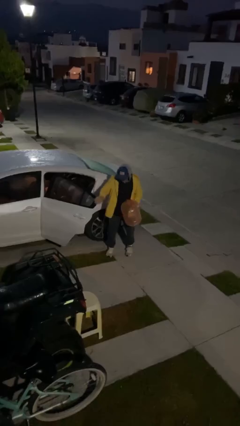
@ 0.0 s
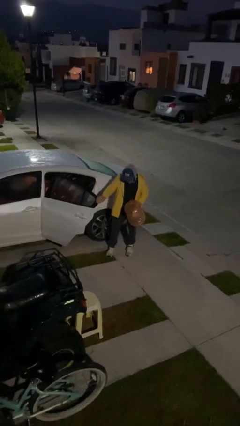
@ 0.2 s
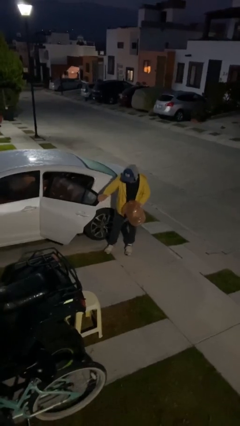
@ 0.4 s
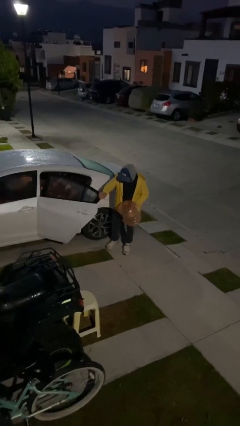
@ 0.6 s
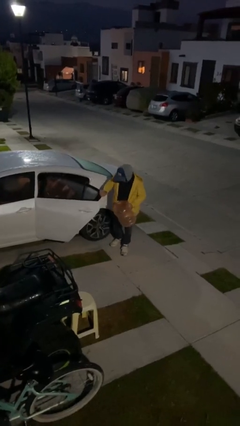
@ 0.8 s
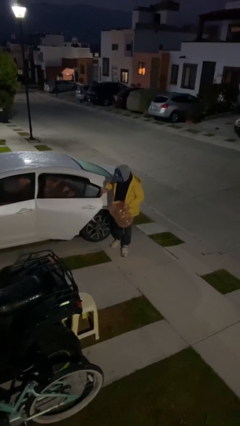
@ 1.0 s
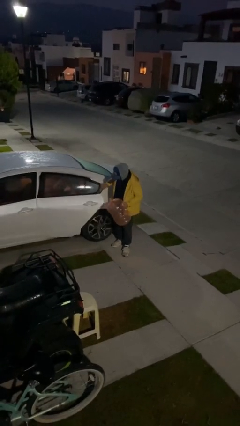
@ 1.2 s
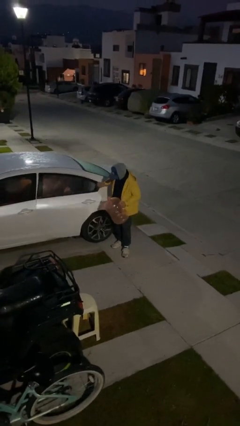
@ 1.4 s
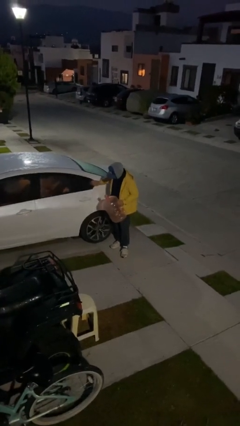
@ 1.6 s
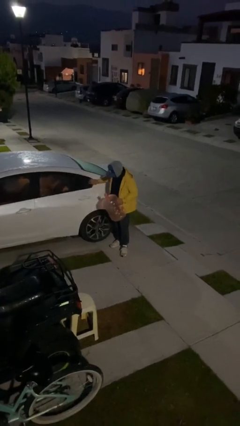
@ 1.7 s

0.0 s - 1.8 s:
person closes car door

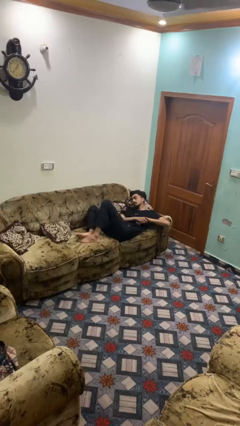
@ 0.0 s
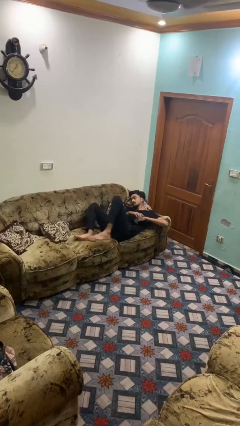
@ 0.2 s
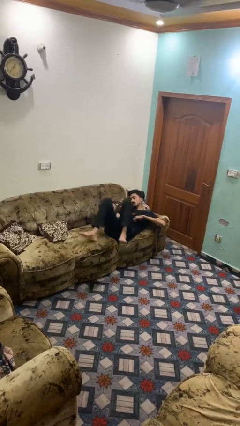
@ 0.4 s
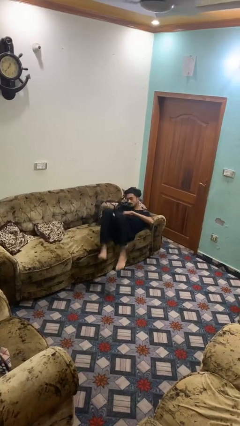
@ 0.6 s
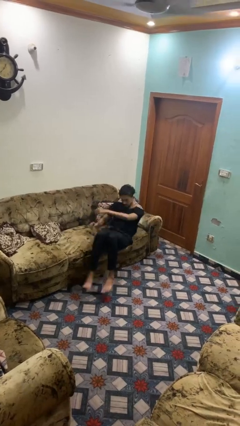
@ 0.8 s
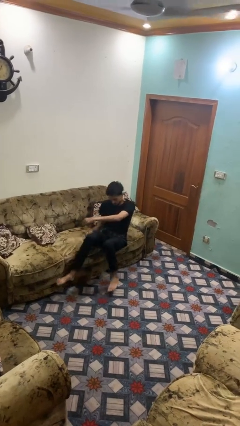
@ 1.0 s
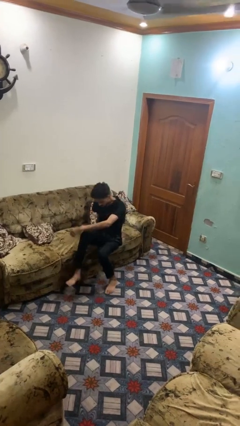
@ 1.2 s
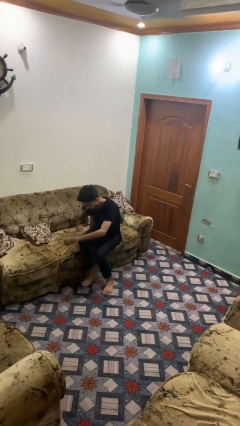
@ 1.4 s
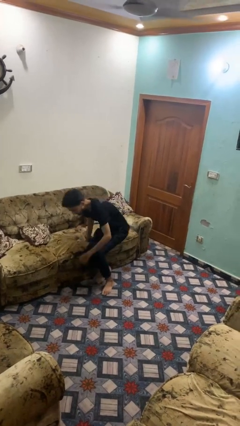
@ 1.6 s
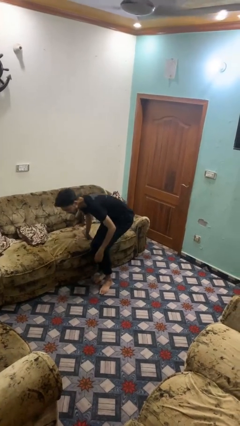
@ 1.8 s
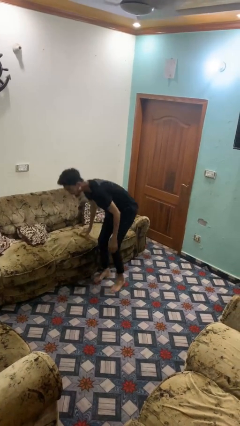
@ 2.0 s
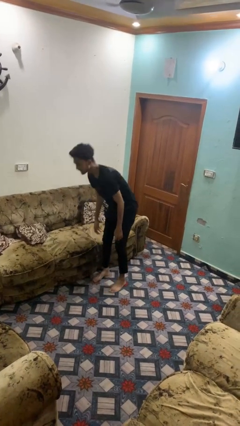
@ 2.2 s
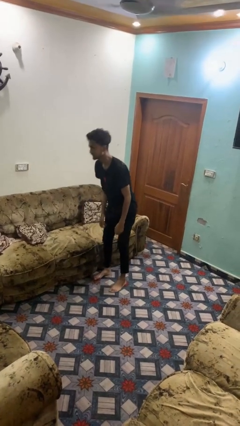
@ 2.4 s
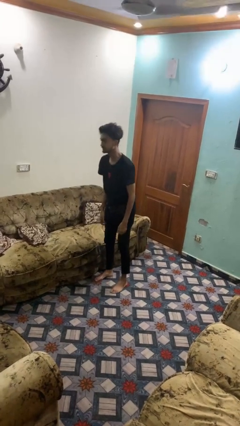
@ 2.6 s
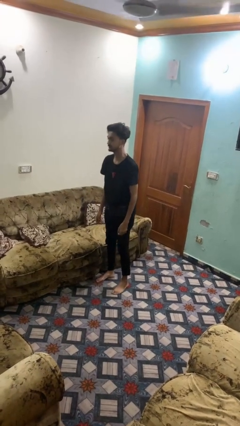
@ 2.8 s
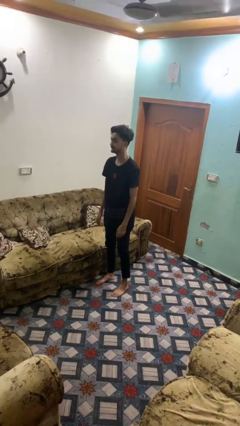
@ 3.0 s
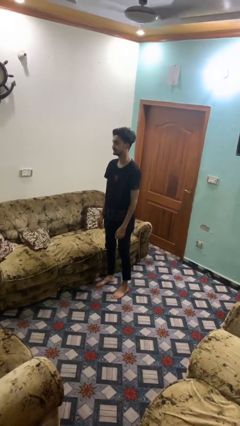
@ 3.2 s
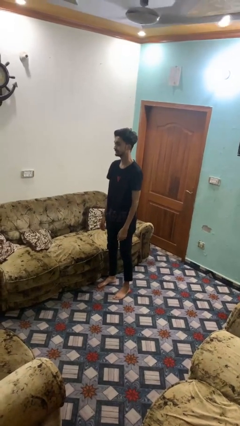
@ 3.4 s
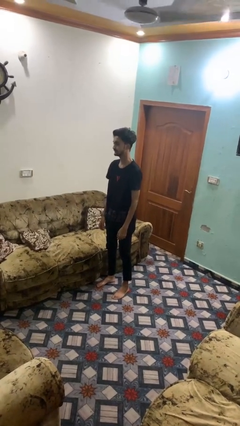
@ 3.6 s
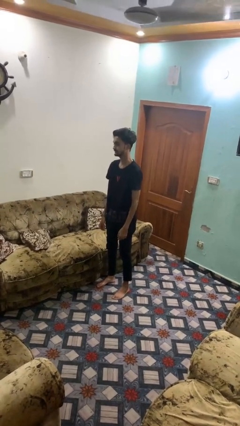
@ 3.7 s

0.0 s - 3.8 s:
person stands up

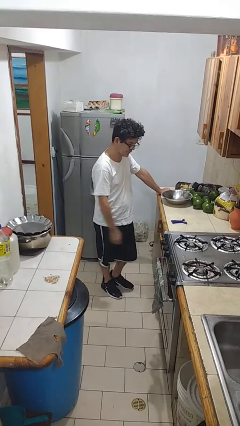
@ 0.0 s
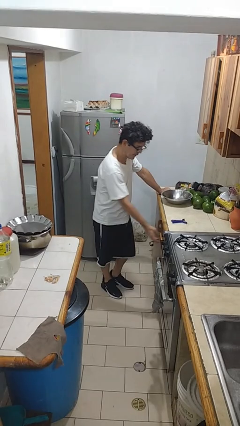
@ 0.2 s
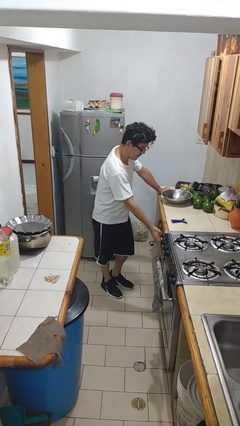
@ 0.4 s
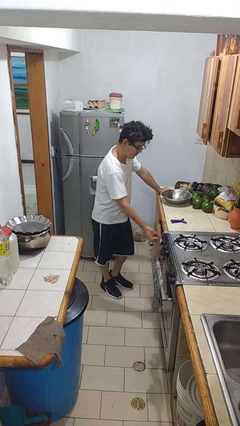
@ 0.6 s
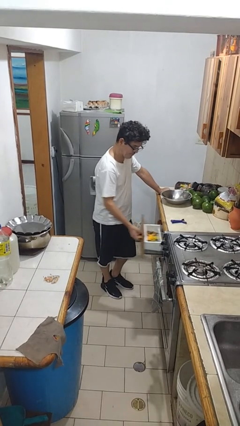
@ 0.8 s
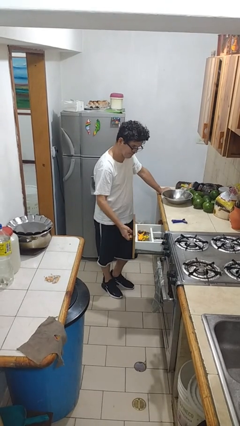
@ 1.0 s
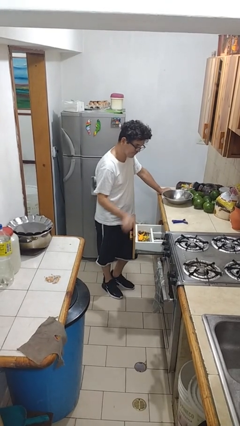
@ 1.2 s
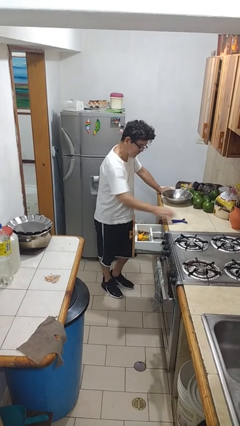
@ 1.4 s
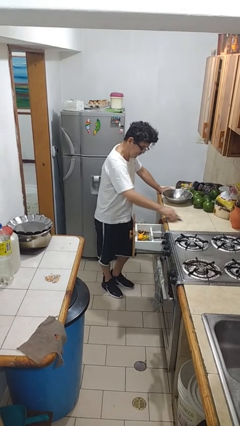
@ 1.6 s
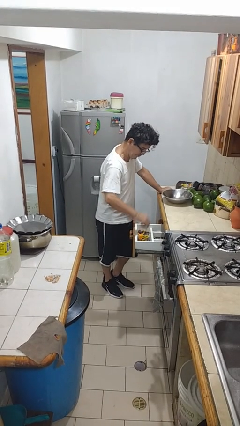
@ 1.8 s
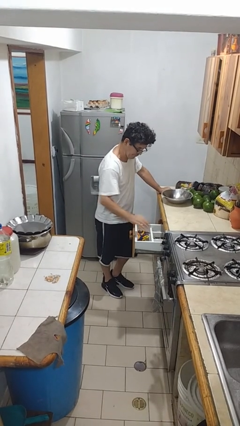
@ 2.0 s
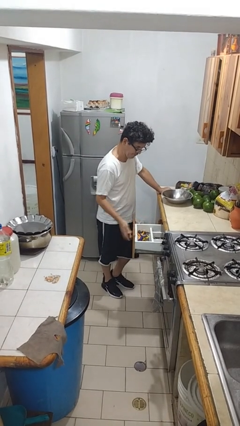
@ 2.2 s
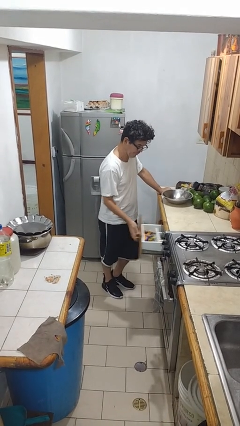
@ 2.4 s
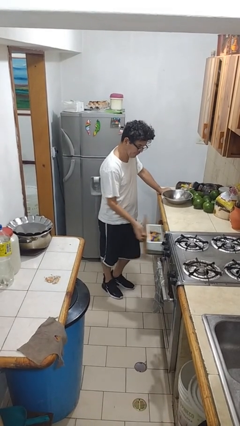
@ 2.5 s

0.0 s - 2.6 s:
person puts object into kitchen drawer

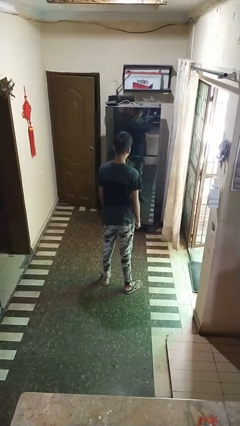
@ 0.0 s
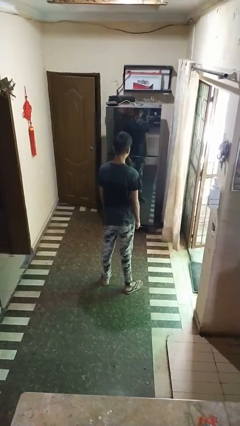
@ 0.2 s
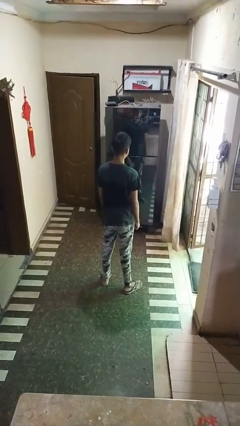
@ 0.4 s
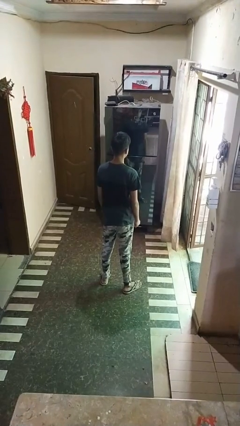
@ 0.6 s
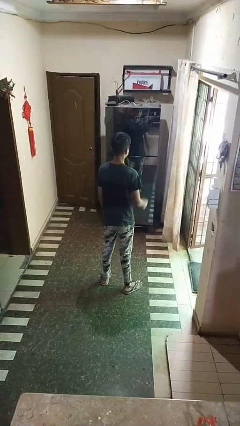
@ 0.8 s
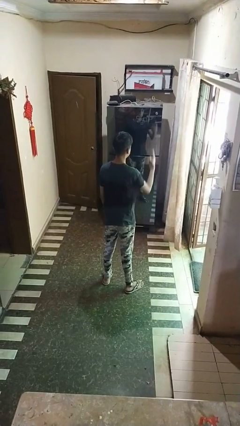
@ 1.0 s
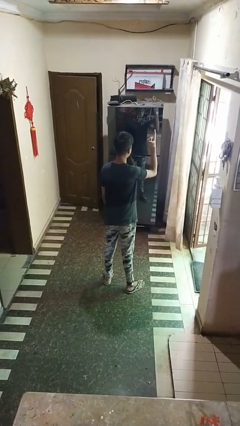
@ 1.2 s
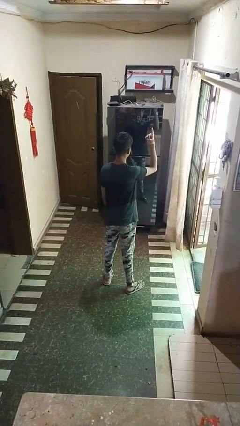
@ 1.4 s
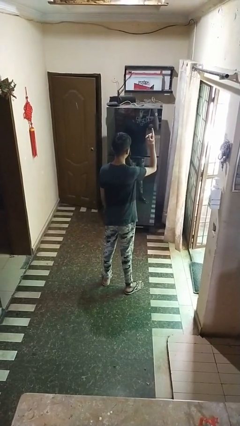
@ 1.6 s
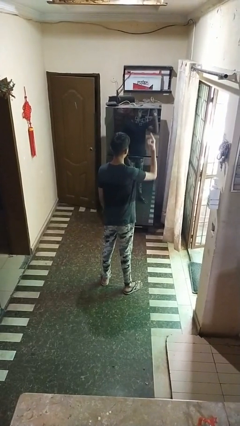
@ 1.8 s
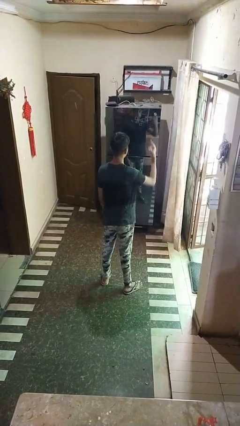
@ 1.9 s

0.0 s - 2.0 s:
person gestures number one

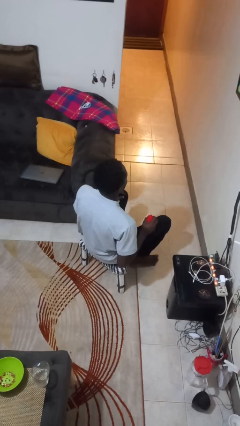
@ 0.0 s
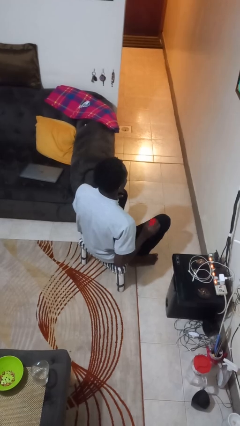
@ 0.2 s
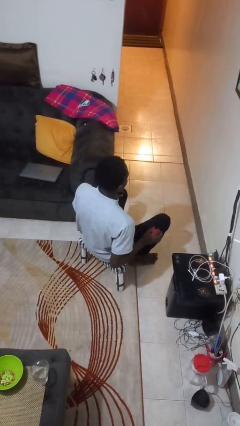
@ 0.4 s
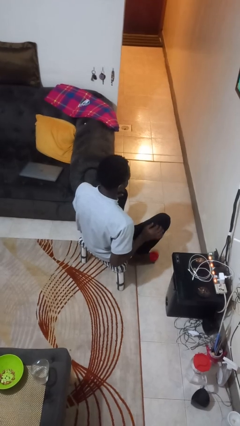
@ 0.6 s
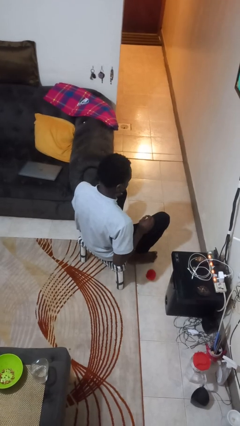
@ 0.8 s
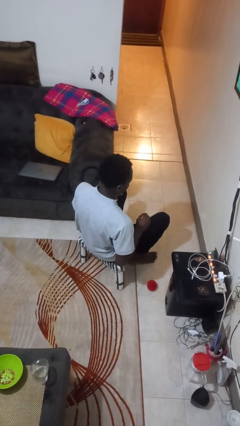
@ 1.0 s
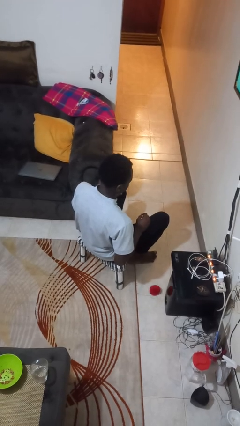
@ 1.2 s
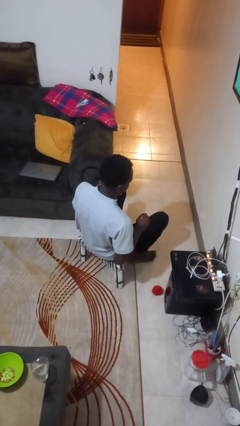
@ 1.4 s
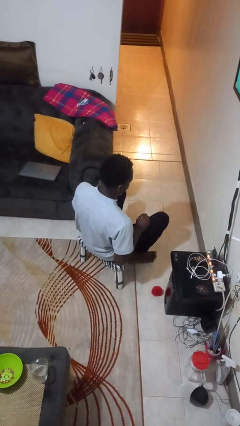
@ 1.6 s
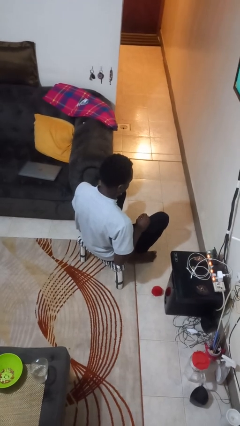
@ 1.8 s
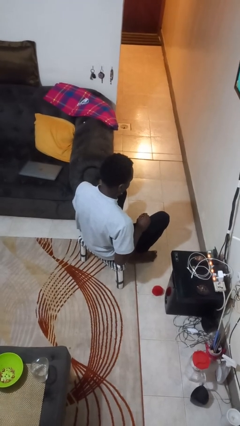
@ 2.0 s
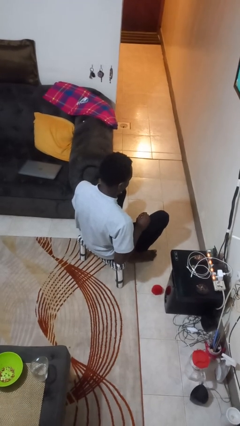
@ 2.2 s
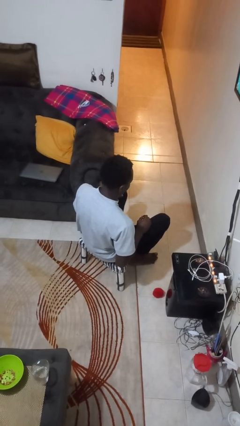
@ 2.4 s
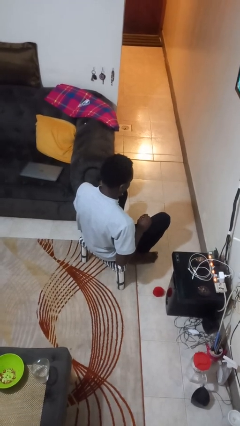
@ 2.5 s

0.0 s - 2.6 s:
person drops object

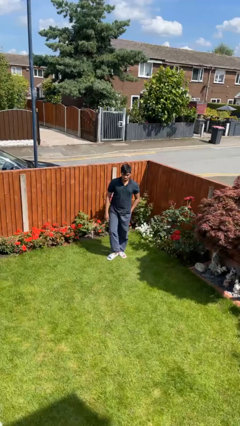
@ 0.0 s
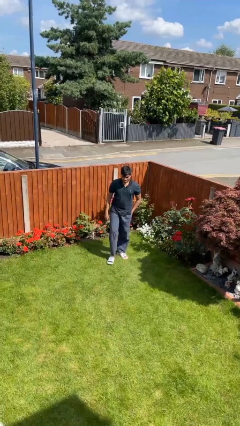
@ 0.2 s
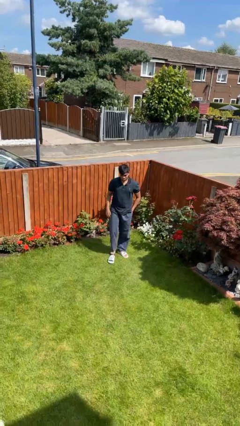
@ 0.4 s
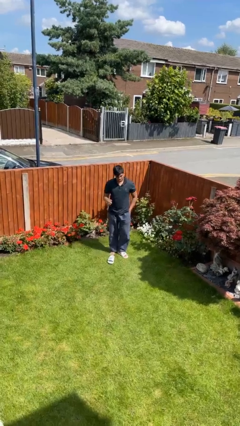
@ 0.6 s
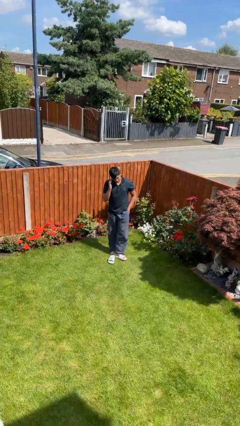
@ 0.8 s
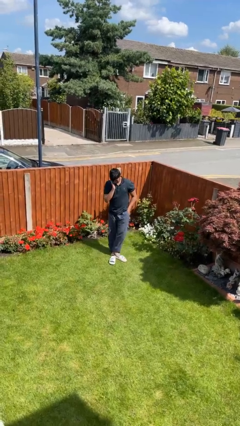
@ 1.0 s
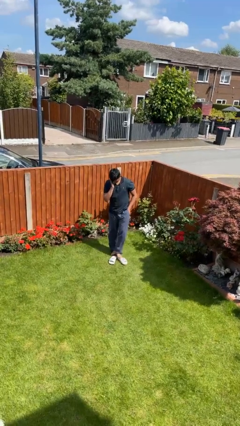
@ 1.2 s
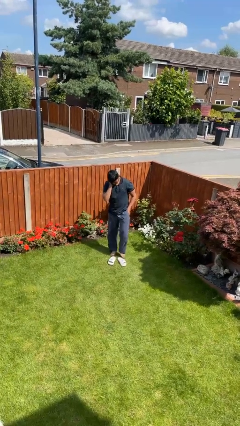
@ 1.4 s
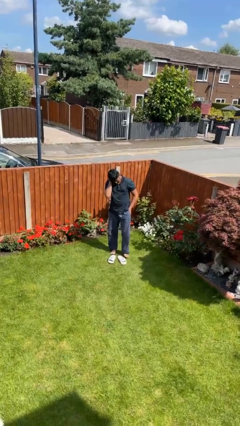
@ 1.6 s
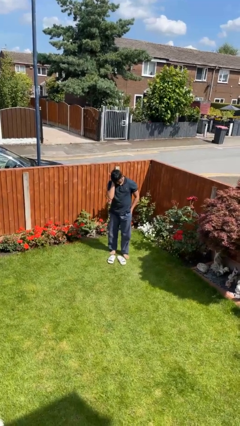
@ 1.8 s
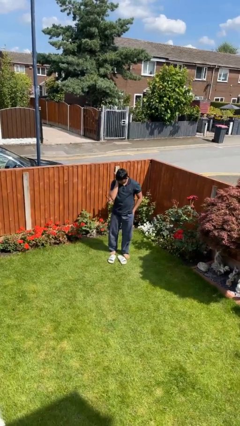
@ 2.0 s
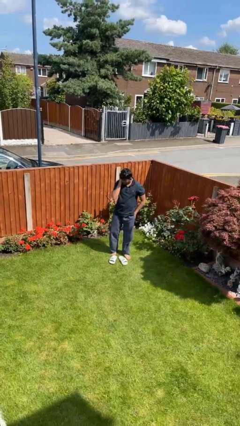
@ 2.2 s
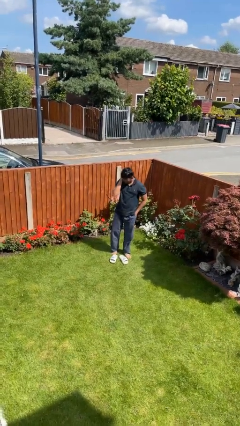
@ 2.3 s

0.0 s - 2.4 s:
person takes off shoes

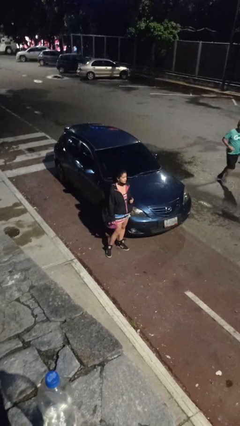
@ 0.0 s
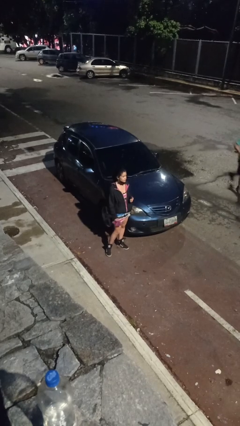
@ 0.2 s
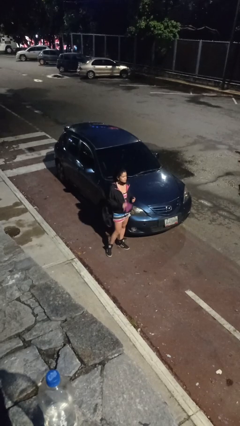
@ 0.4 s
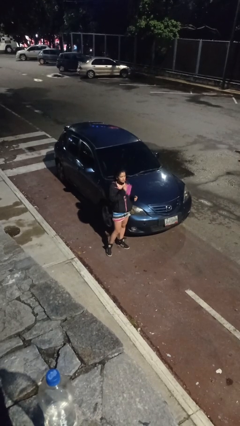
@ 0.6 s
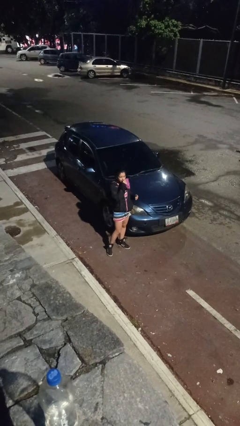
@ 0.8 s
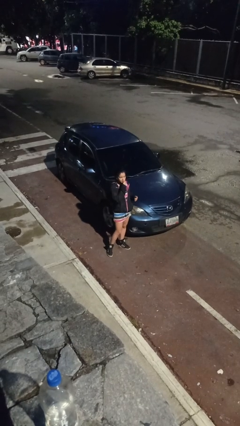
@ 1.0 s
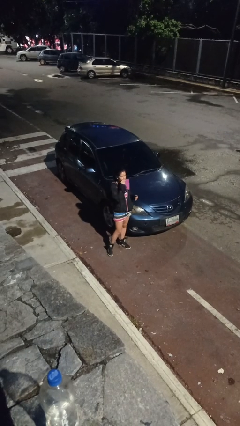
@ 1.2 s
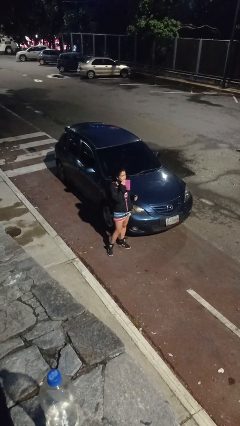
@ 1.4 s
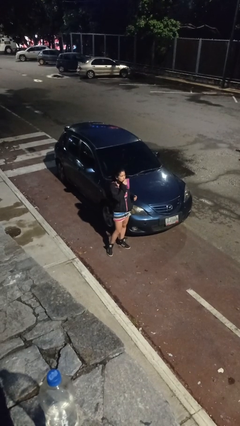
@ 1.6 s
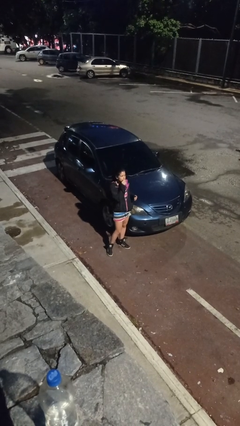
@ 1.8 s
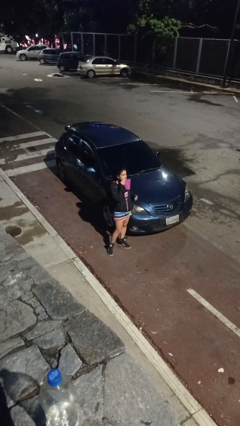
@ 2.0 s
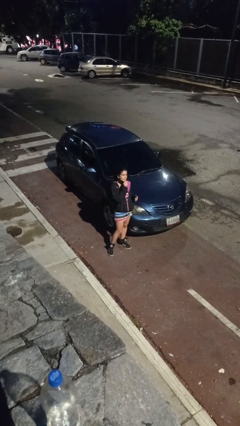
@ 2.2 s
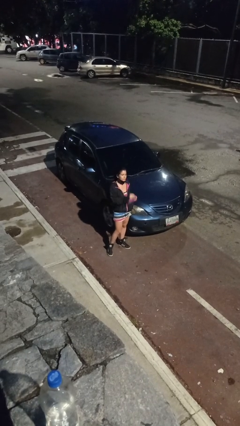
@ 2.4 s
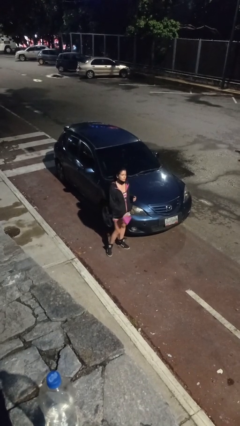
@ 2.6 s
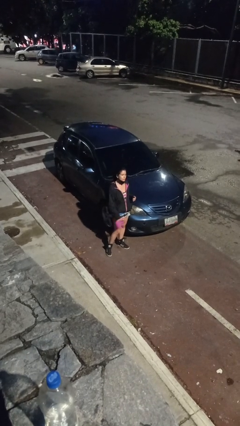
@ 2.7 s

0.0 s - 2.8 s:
person wipes mouth with napkin
